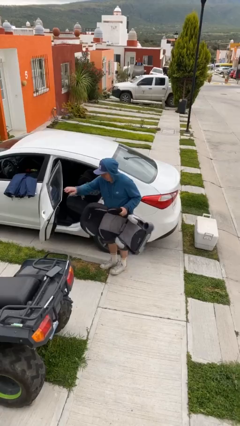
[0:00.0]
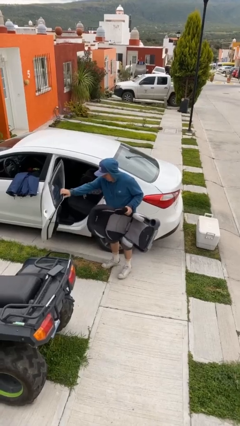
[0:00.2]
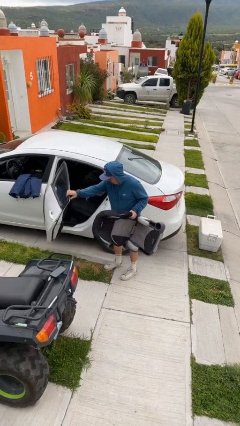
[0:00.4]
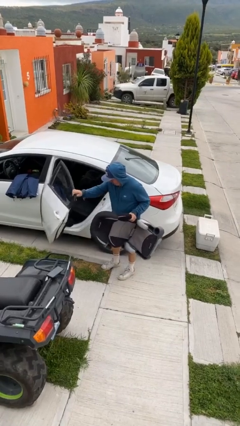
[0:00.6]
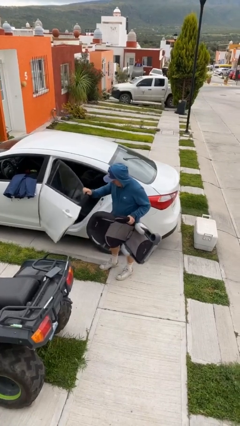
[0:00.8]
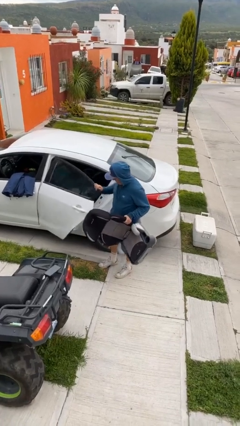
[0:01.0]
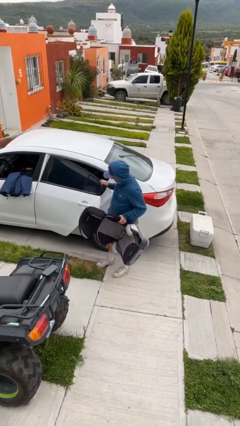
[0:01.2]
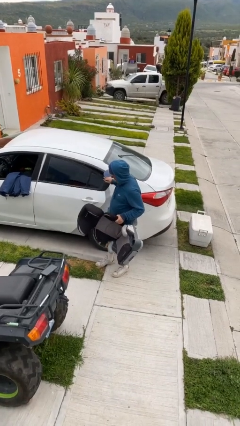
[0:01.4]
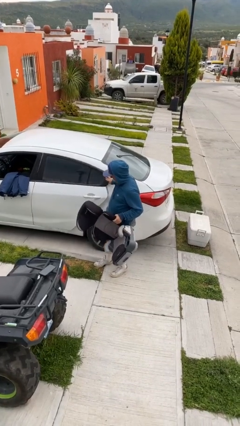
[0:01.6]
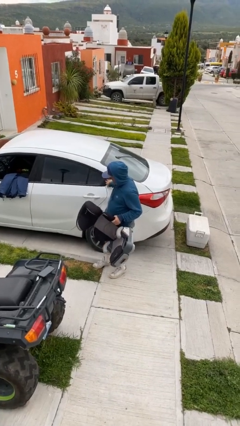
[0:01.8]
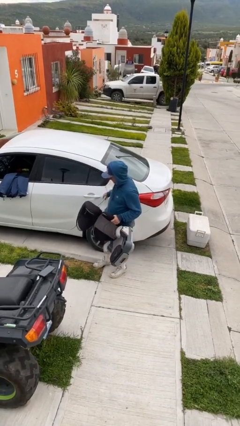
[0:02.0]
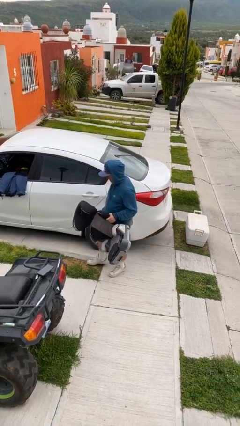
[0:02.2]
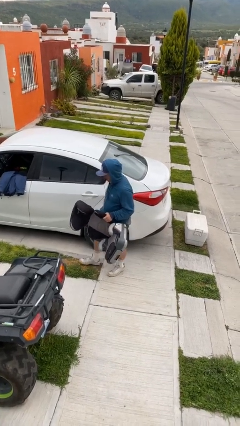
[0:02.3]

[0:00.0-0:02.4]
person closes car door

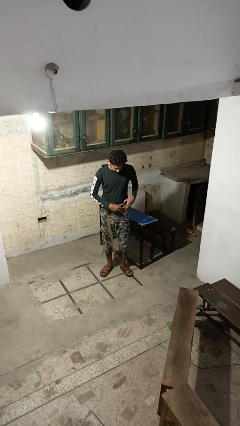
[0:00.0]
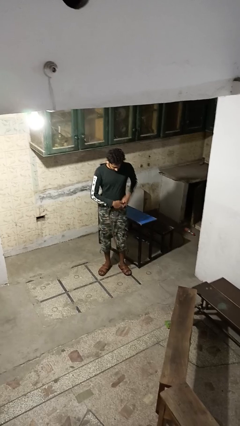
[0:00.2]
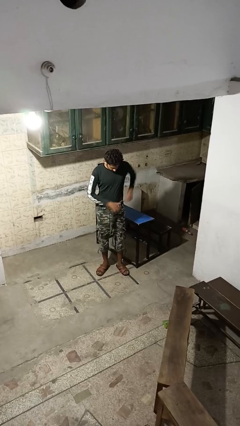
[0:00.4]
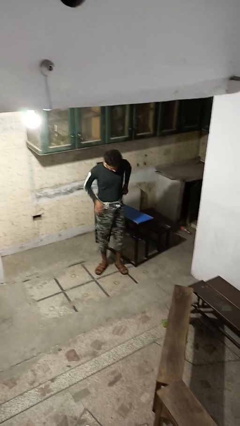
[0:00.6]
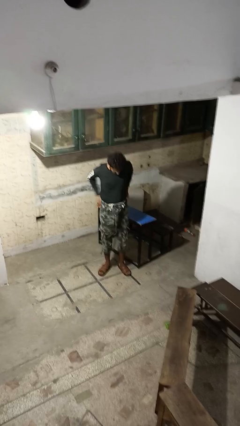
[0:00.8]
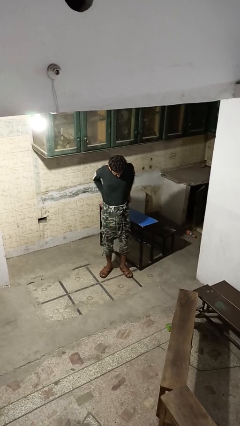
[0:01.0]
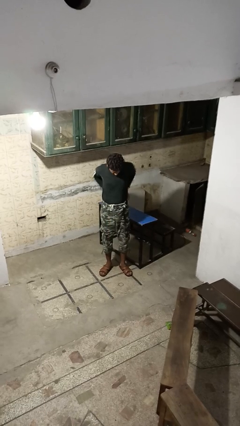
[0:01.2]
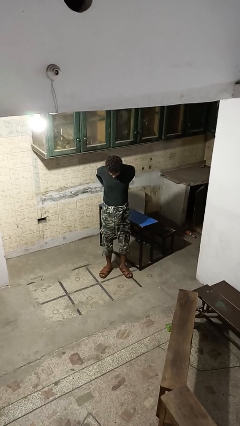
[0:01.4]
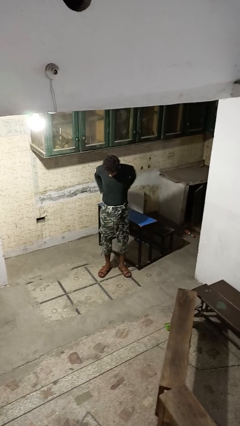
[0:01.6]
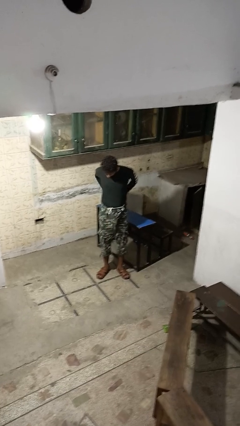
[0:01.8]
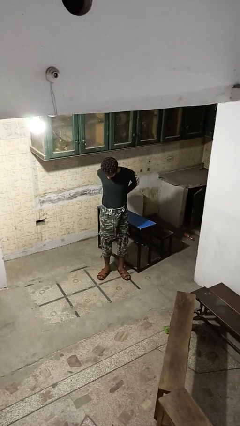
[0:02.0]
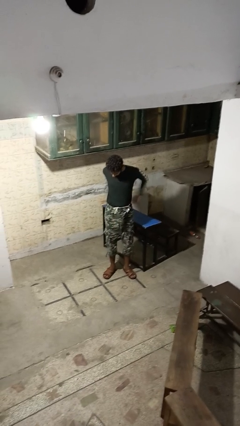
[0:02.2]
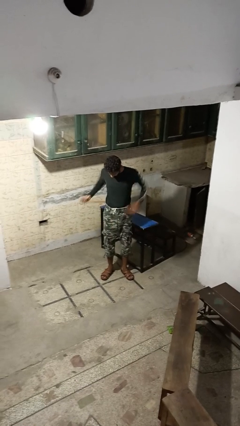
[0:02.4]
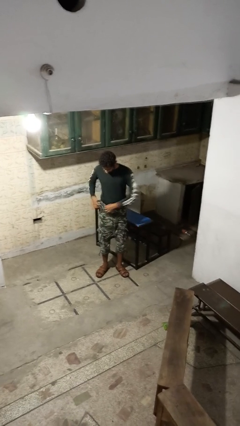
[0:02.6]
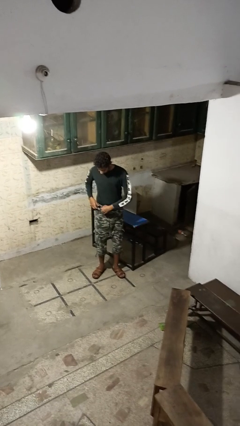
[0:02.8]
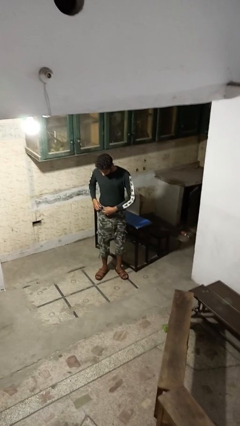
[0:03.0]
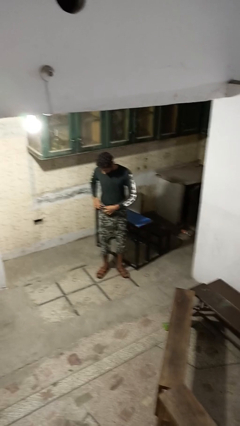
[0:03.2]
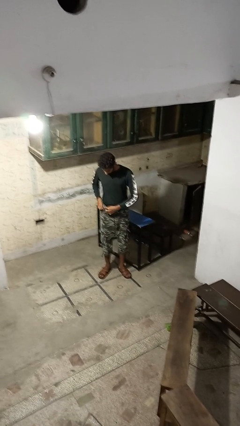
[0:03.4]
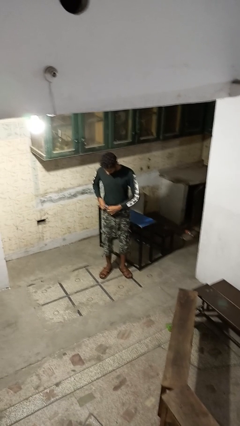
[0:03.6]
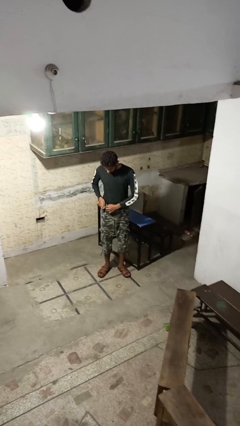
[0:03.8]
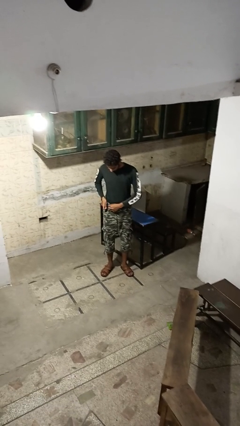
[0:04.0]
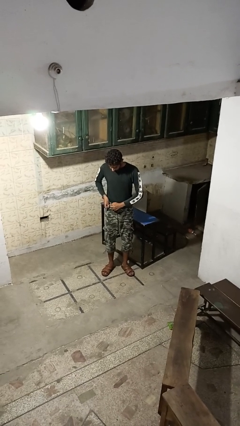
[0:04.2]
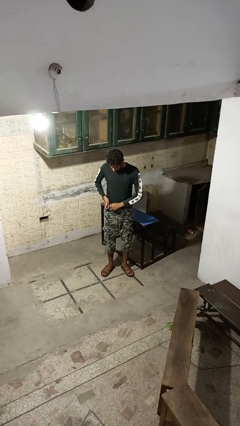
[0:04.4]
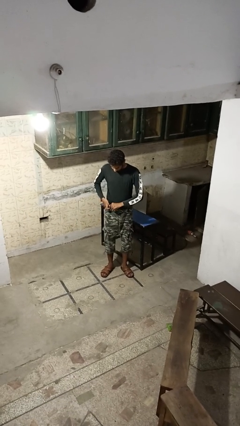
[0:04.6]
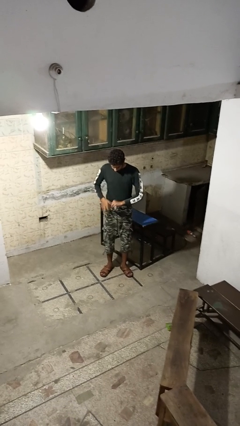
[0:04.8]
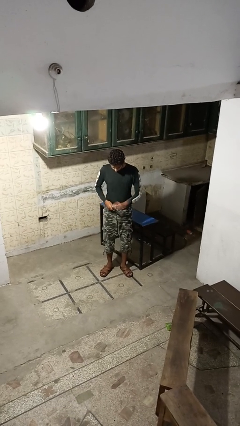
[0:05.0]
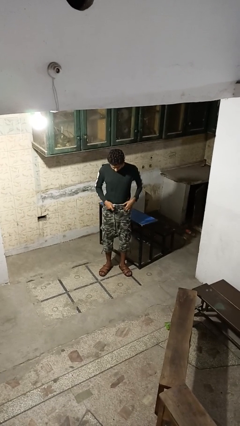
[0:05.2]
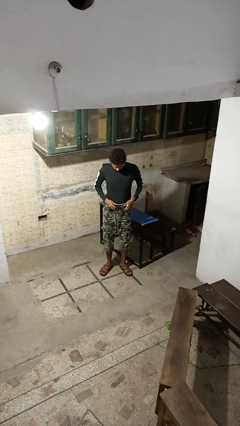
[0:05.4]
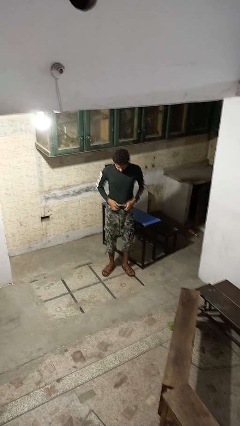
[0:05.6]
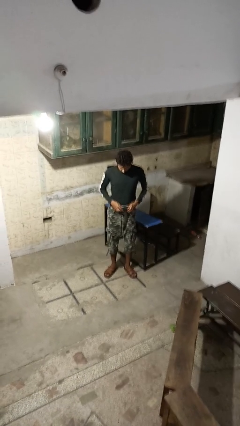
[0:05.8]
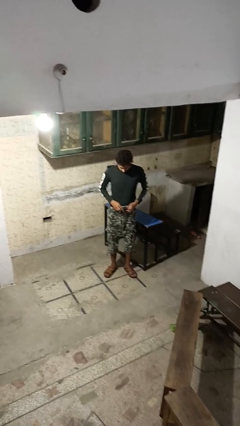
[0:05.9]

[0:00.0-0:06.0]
person puts on belt

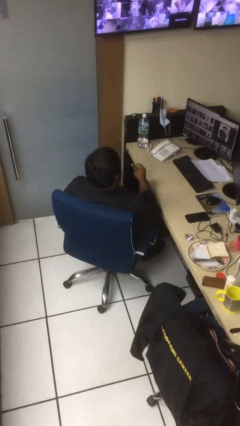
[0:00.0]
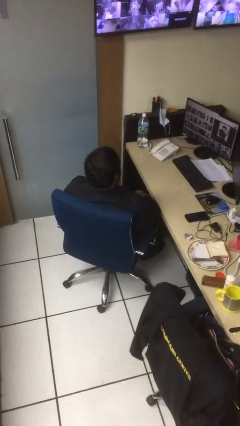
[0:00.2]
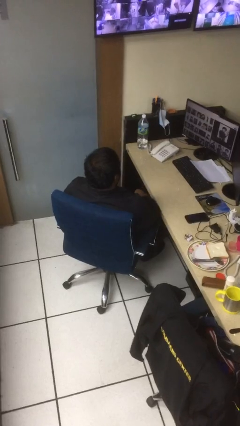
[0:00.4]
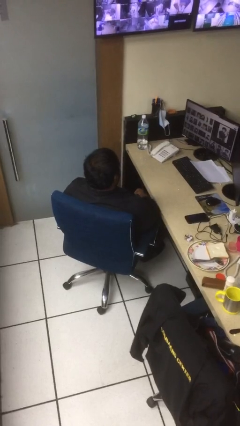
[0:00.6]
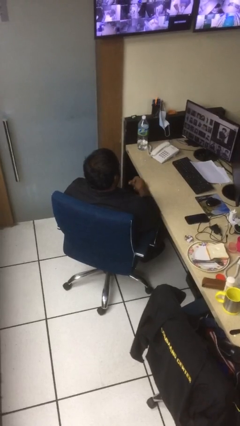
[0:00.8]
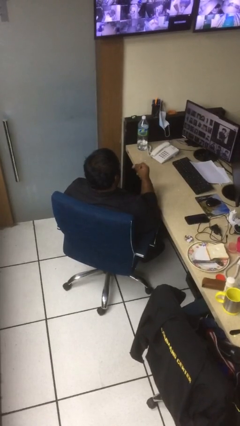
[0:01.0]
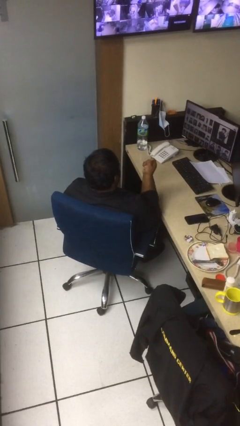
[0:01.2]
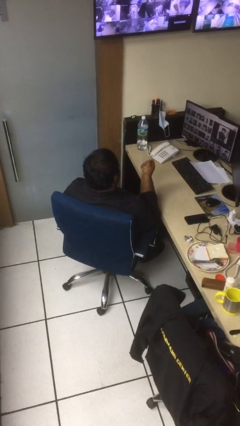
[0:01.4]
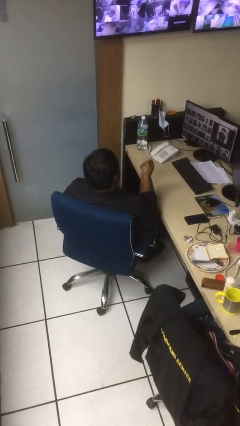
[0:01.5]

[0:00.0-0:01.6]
person snaps fingers

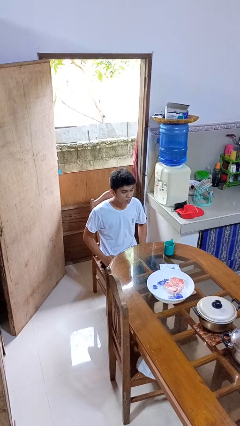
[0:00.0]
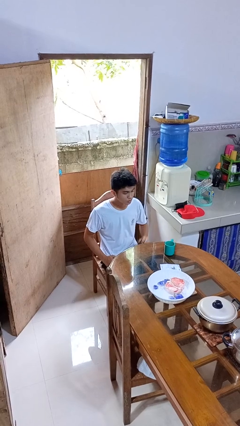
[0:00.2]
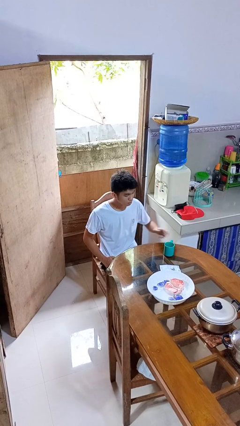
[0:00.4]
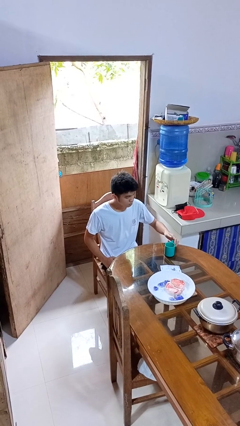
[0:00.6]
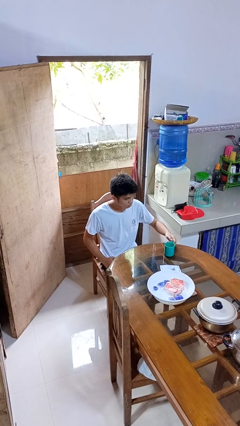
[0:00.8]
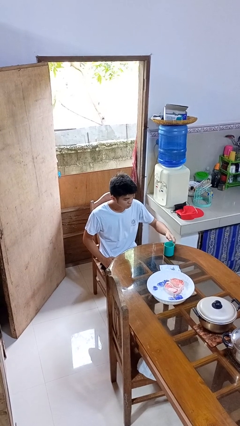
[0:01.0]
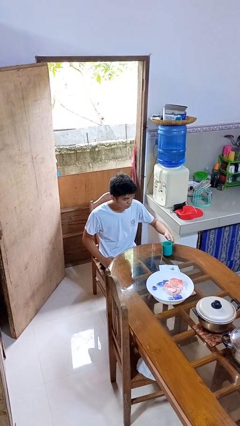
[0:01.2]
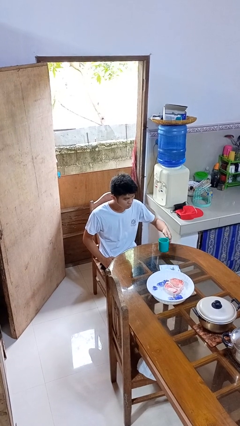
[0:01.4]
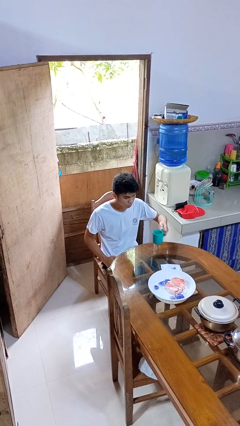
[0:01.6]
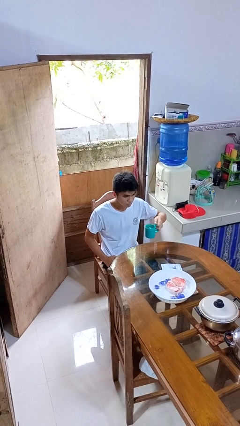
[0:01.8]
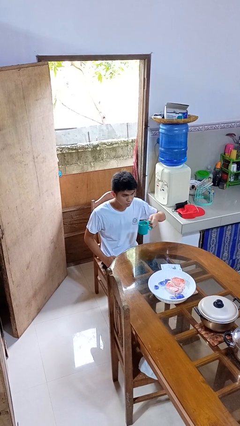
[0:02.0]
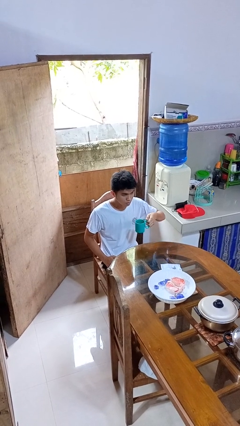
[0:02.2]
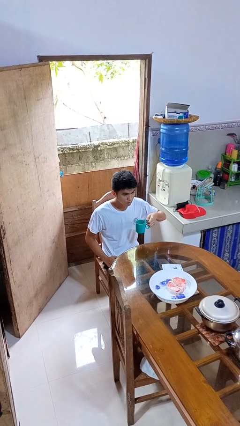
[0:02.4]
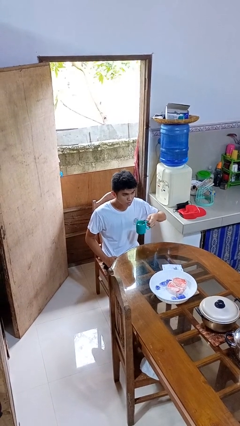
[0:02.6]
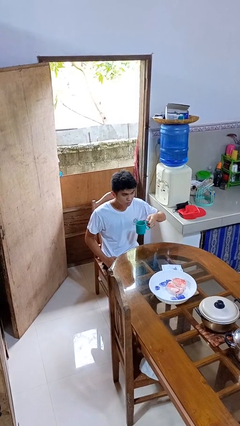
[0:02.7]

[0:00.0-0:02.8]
person picks up object from table

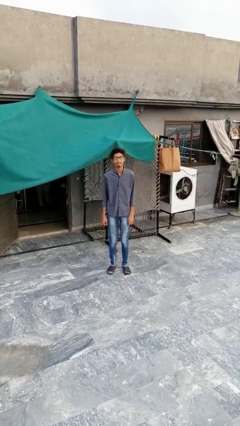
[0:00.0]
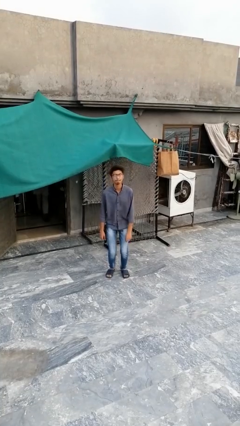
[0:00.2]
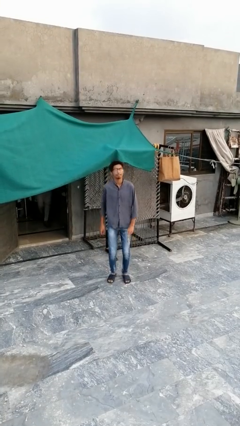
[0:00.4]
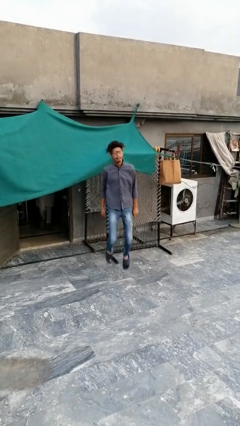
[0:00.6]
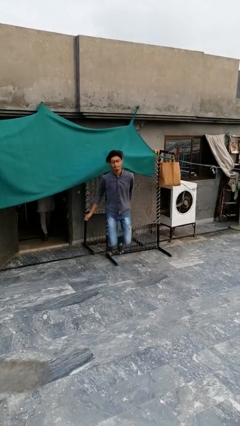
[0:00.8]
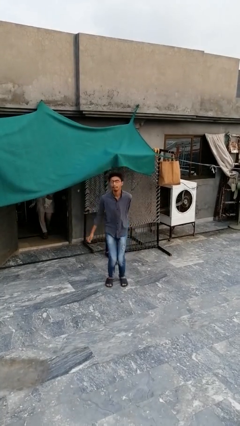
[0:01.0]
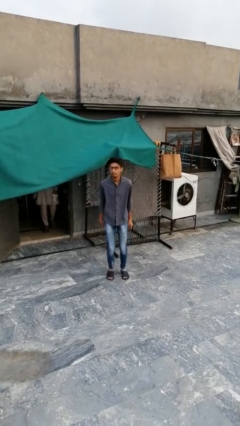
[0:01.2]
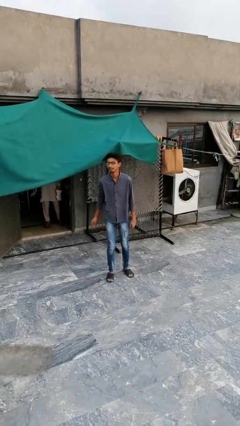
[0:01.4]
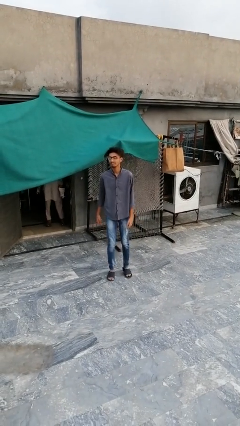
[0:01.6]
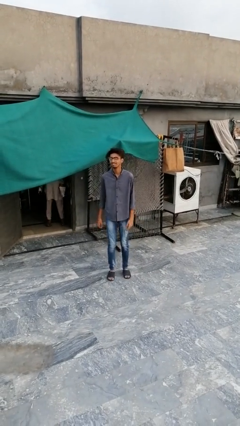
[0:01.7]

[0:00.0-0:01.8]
person jumps

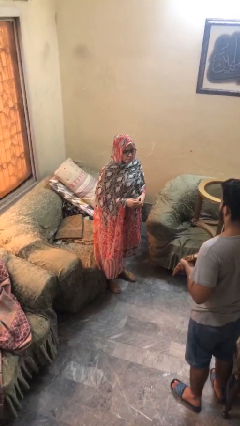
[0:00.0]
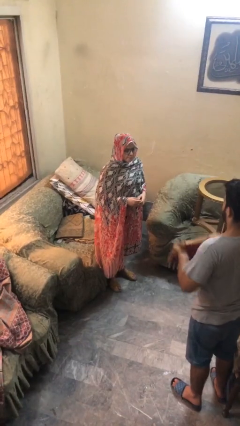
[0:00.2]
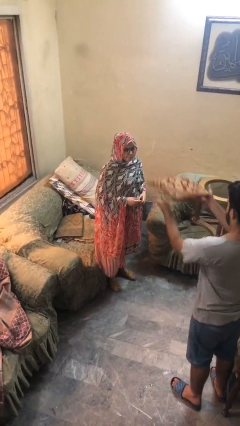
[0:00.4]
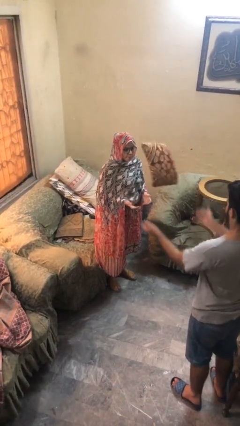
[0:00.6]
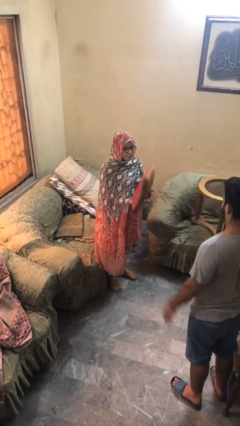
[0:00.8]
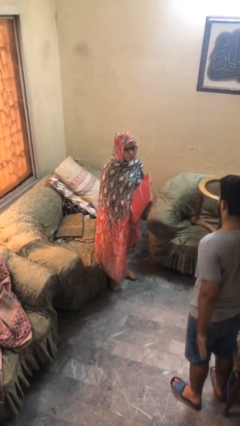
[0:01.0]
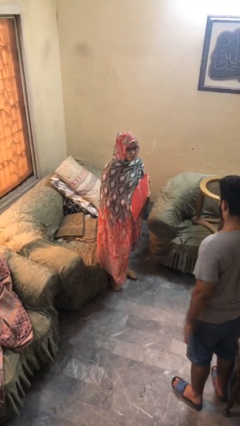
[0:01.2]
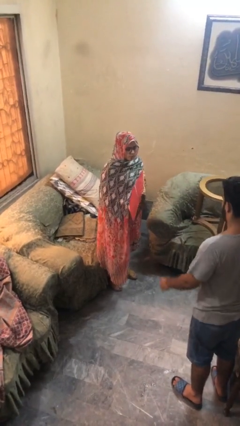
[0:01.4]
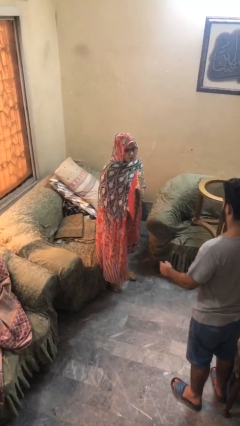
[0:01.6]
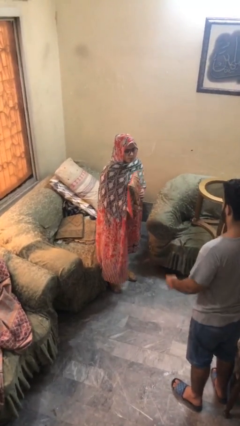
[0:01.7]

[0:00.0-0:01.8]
person catches object from person

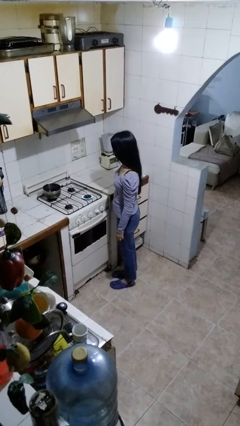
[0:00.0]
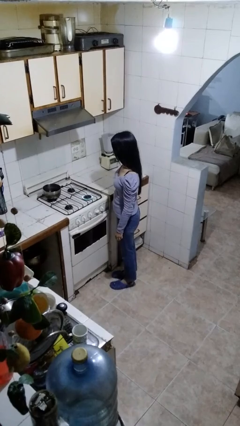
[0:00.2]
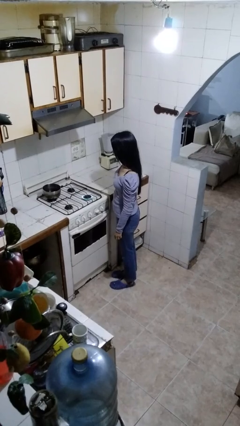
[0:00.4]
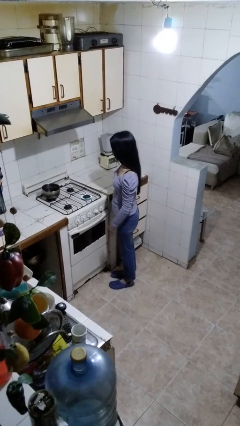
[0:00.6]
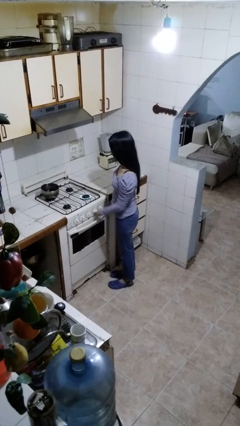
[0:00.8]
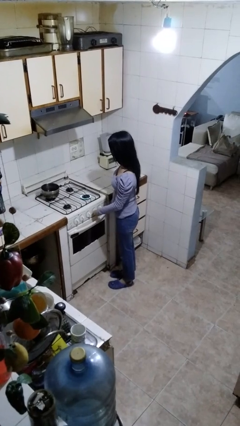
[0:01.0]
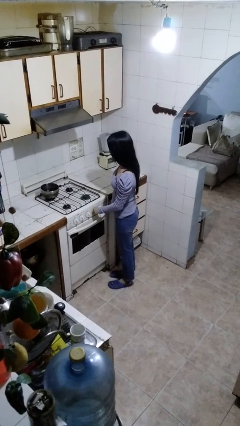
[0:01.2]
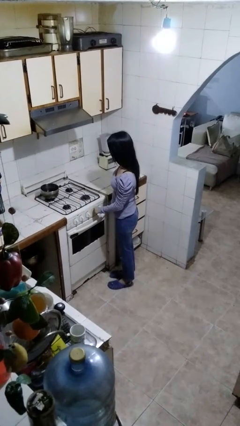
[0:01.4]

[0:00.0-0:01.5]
person turns off stovetop
